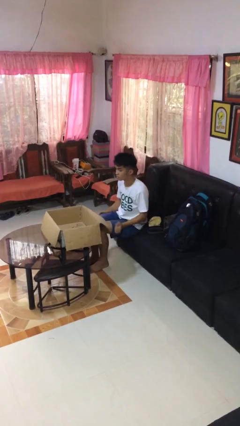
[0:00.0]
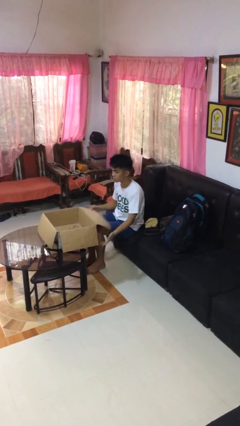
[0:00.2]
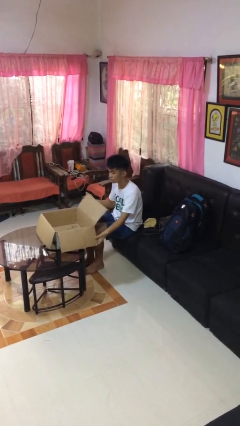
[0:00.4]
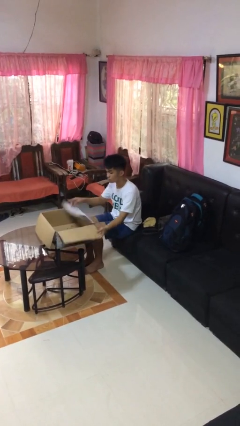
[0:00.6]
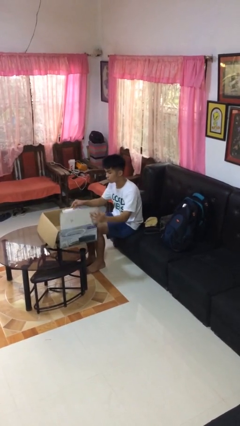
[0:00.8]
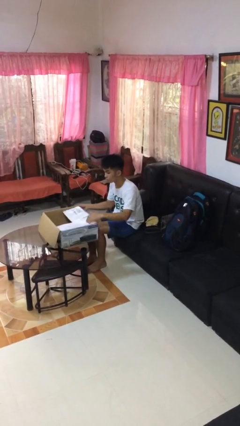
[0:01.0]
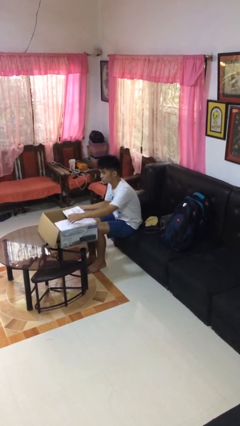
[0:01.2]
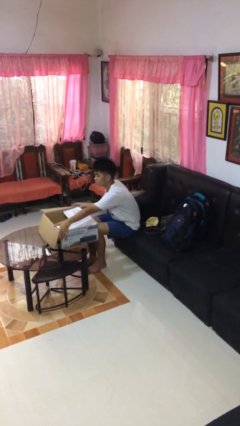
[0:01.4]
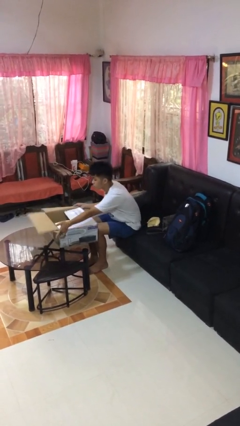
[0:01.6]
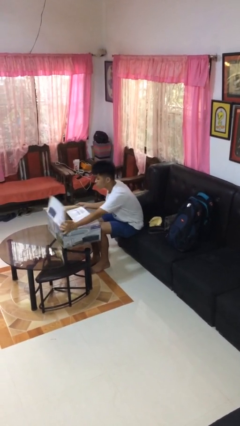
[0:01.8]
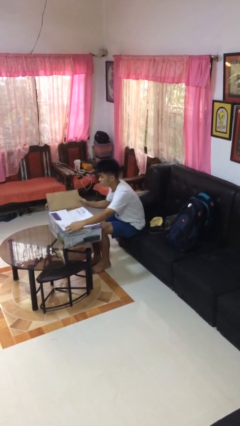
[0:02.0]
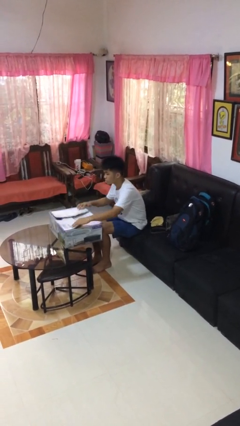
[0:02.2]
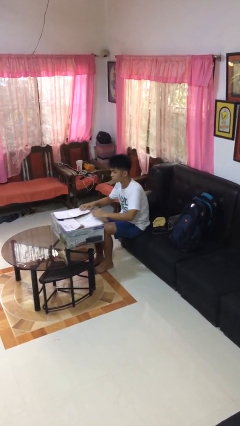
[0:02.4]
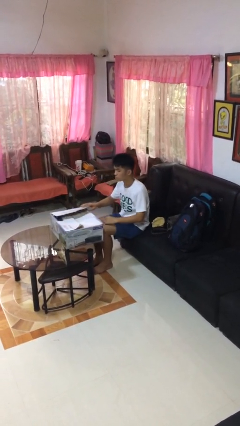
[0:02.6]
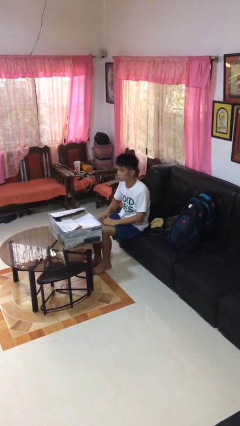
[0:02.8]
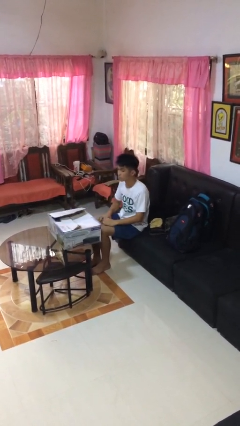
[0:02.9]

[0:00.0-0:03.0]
person closes box

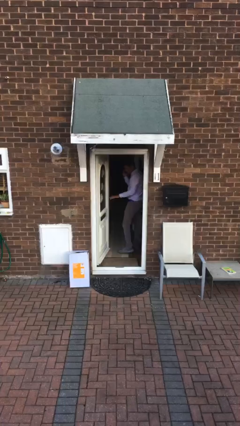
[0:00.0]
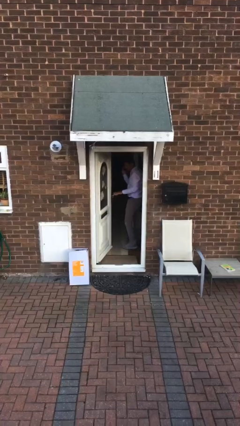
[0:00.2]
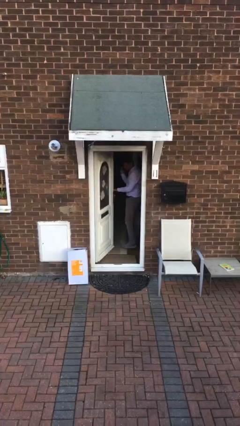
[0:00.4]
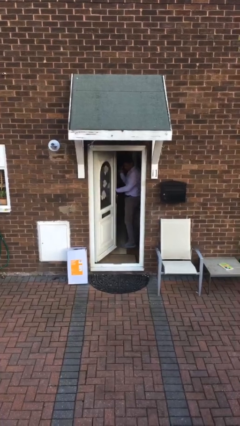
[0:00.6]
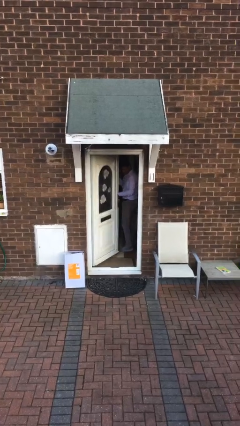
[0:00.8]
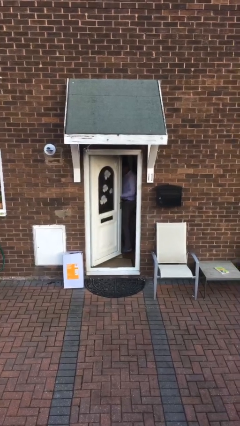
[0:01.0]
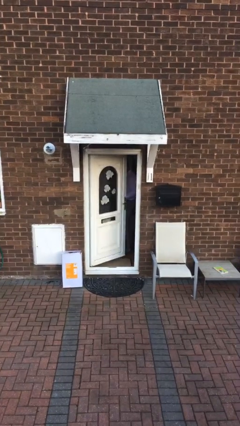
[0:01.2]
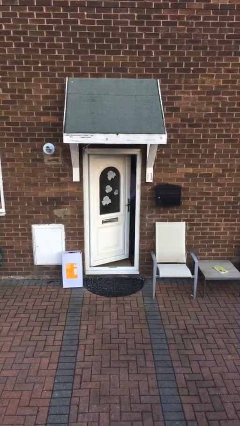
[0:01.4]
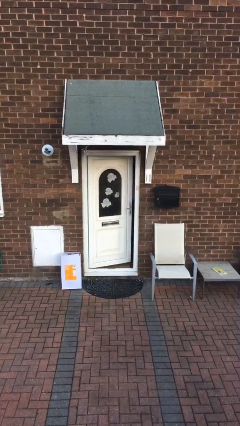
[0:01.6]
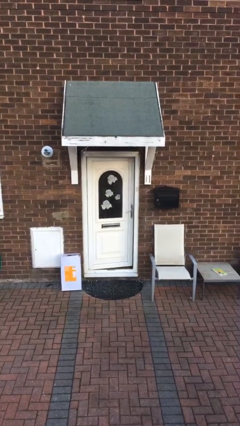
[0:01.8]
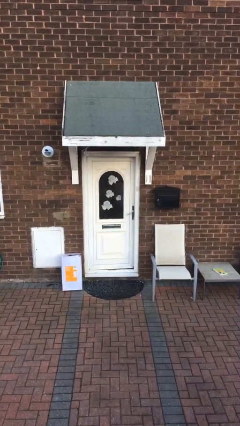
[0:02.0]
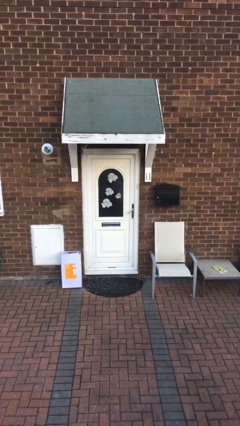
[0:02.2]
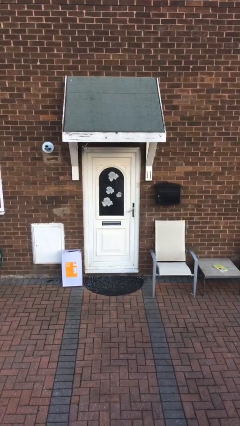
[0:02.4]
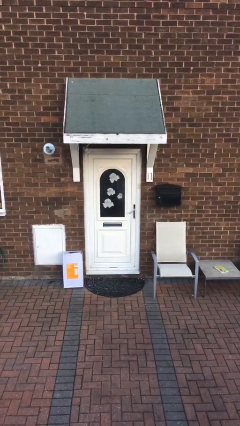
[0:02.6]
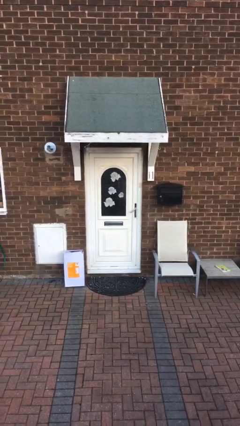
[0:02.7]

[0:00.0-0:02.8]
person closes facility door

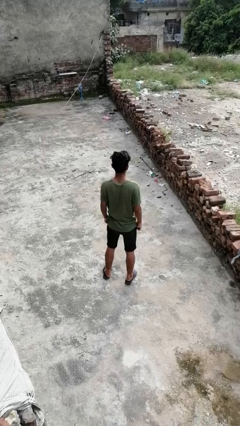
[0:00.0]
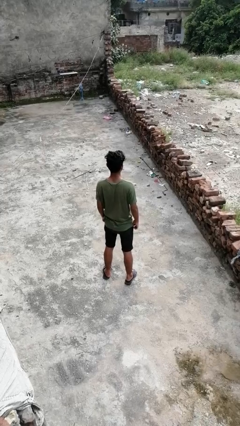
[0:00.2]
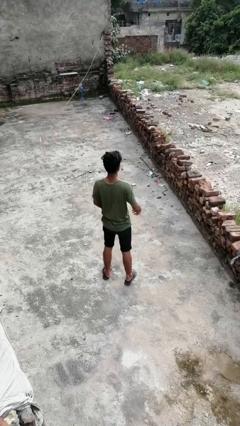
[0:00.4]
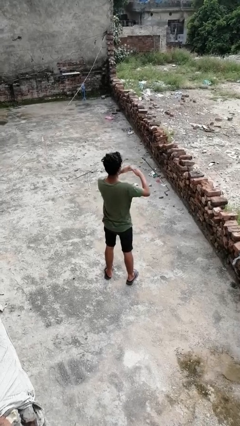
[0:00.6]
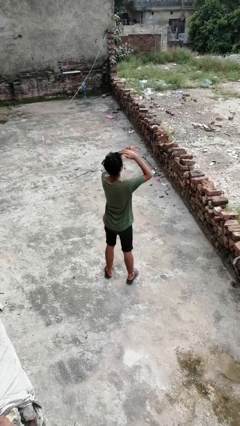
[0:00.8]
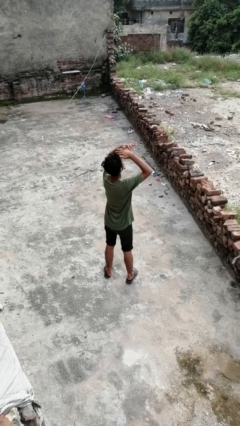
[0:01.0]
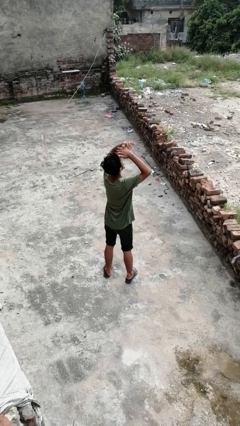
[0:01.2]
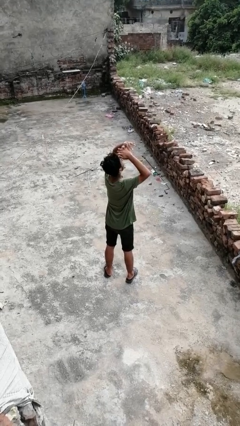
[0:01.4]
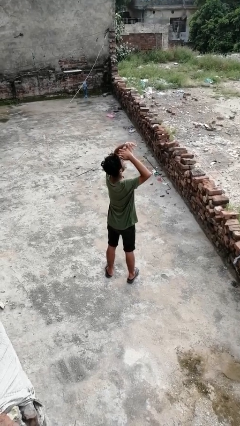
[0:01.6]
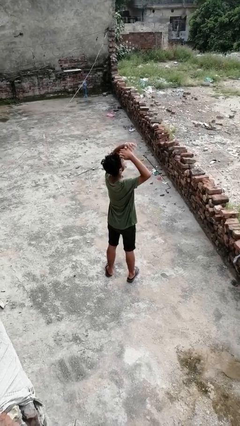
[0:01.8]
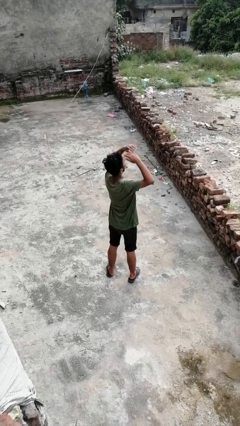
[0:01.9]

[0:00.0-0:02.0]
person shades eyes

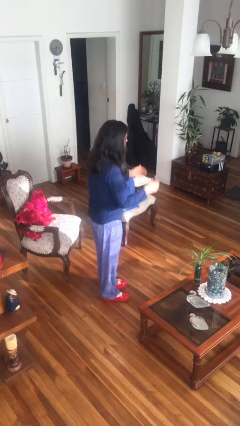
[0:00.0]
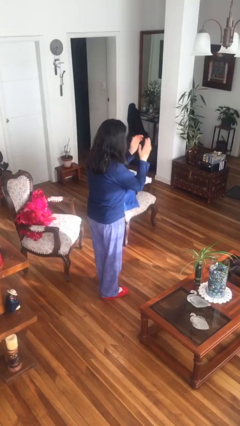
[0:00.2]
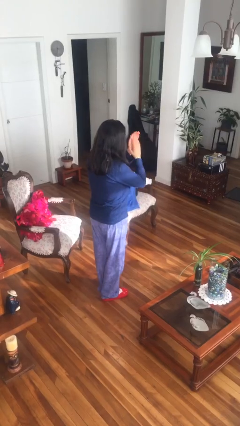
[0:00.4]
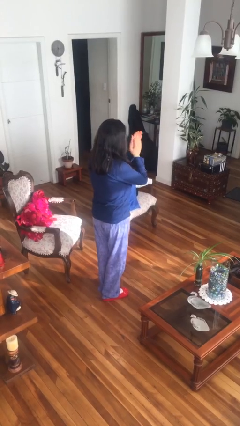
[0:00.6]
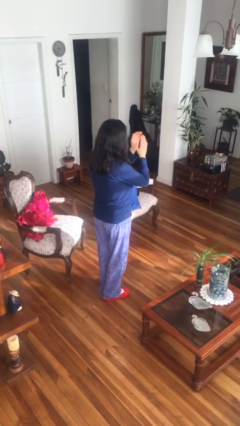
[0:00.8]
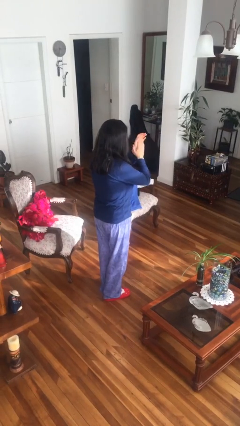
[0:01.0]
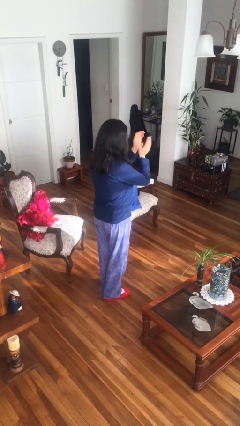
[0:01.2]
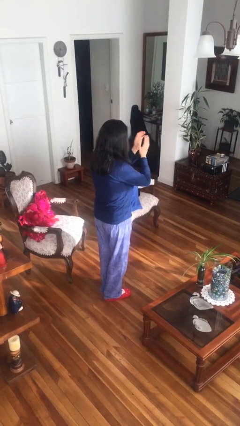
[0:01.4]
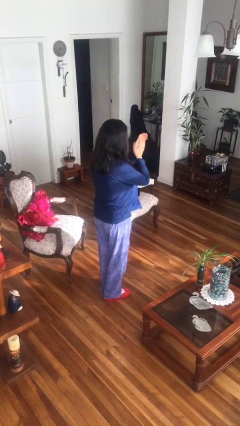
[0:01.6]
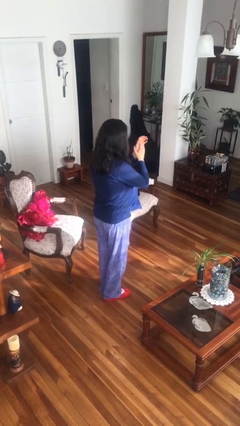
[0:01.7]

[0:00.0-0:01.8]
person claps hands

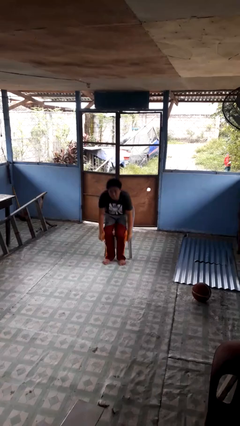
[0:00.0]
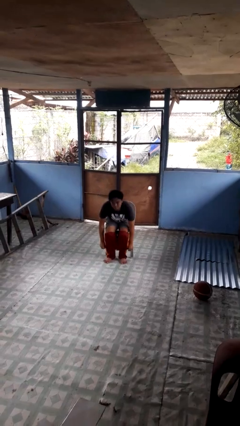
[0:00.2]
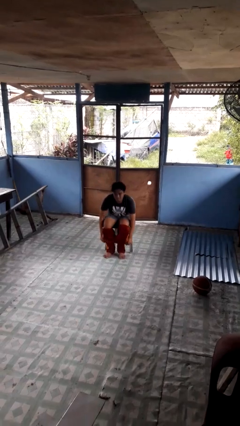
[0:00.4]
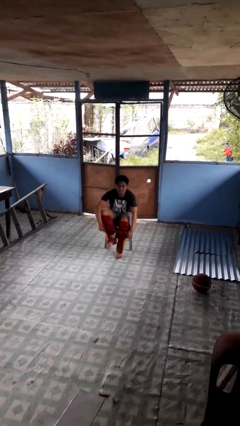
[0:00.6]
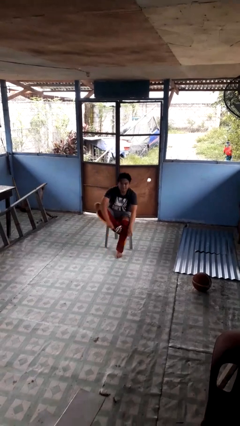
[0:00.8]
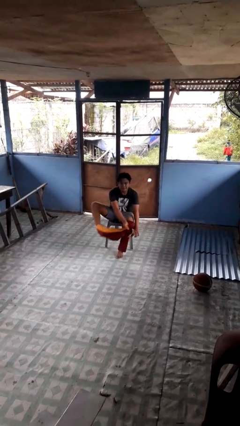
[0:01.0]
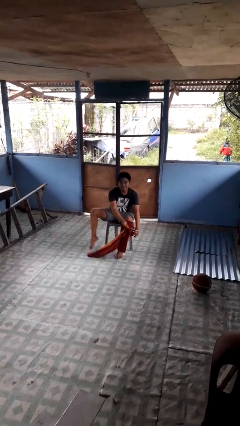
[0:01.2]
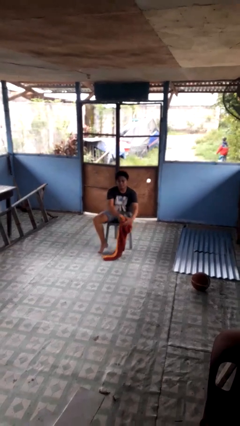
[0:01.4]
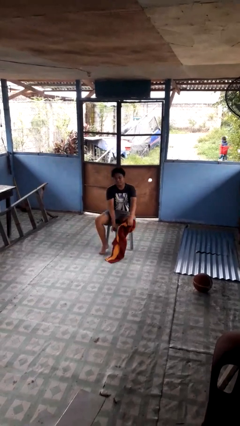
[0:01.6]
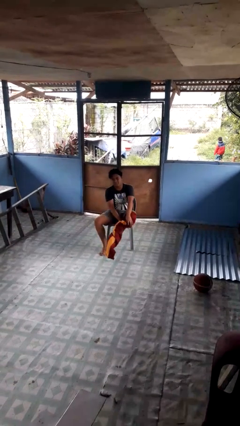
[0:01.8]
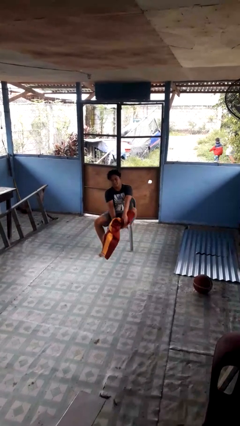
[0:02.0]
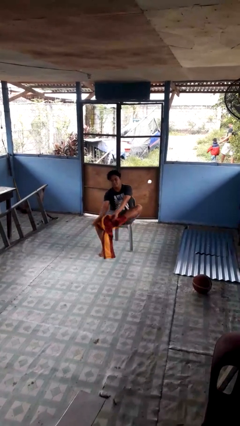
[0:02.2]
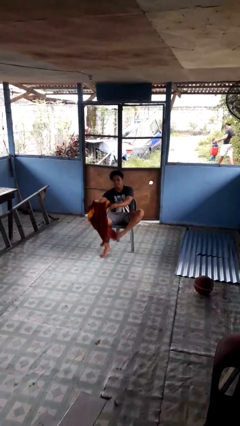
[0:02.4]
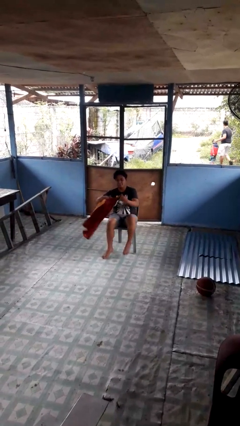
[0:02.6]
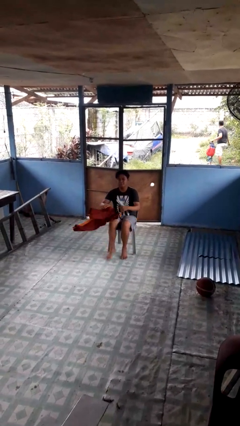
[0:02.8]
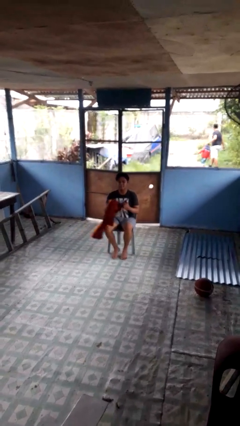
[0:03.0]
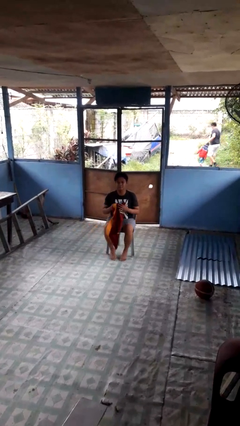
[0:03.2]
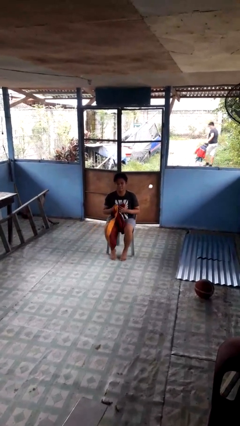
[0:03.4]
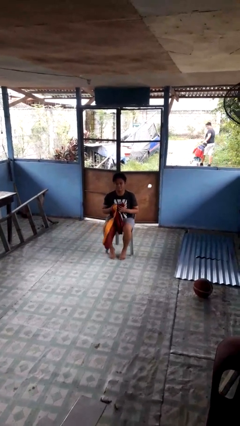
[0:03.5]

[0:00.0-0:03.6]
person takes off pants

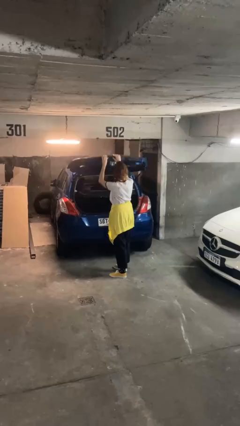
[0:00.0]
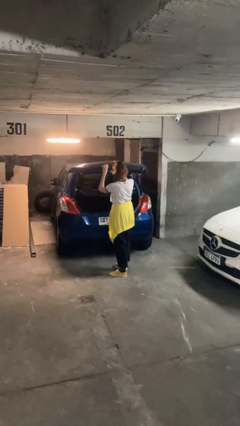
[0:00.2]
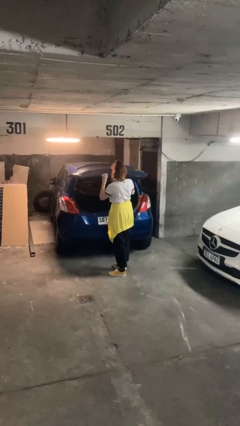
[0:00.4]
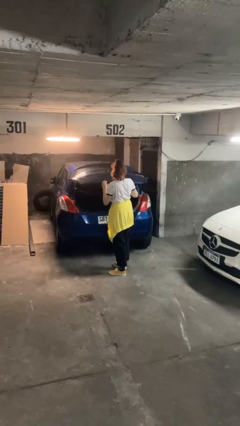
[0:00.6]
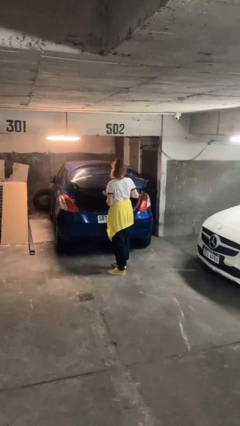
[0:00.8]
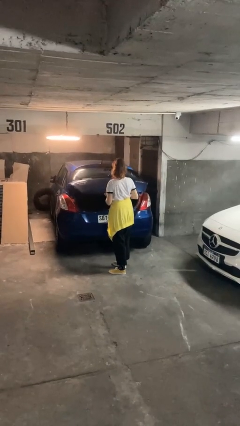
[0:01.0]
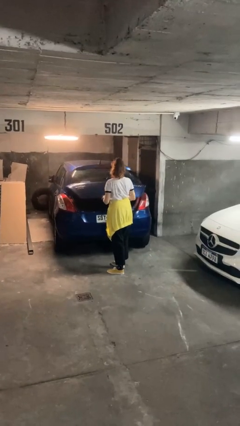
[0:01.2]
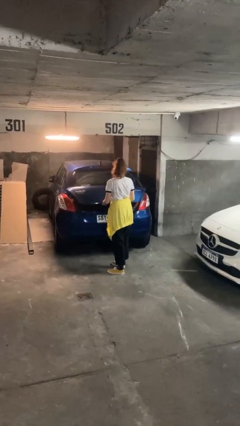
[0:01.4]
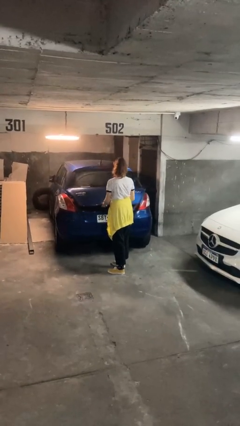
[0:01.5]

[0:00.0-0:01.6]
person closes car trunk

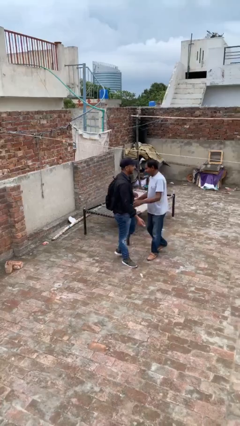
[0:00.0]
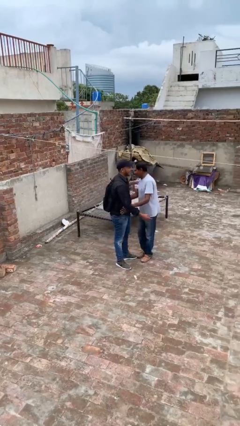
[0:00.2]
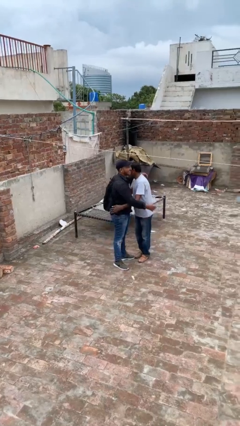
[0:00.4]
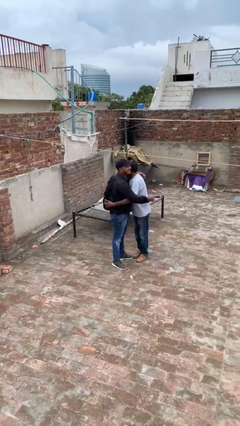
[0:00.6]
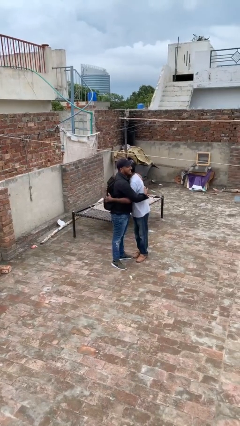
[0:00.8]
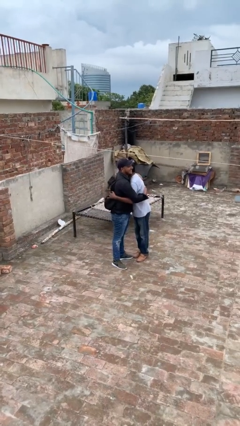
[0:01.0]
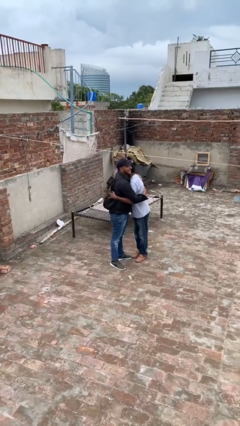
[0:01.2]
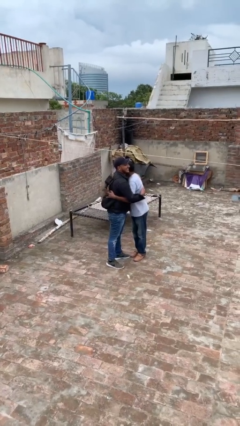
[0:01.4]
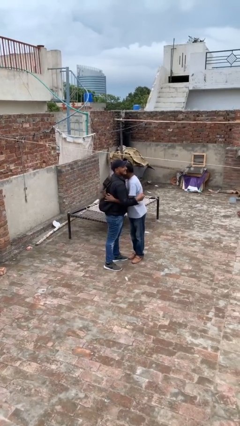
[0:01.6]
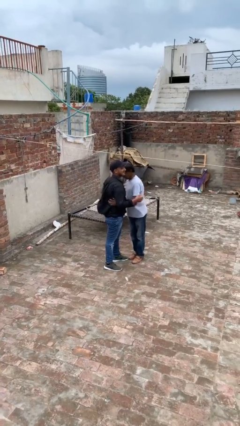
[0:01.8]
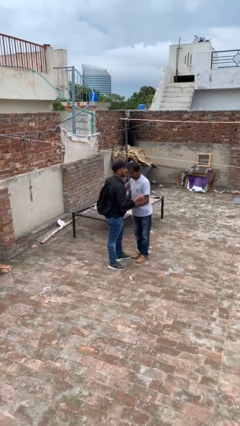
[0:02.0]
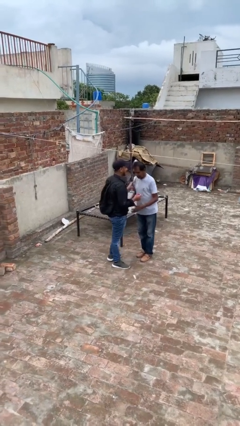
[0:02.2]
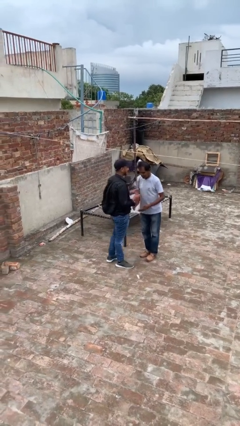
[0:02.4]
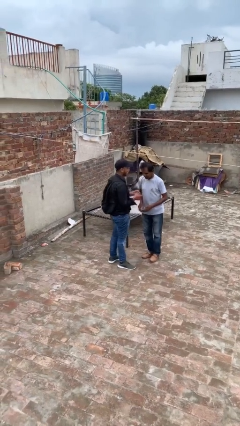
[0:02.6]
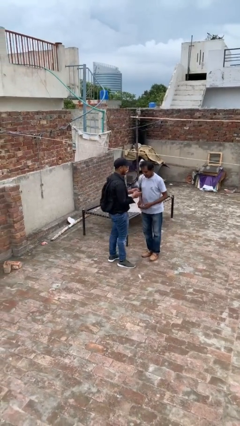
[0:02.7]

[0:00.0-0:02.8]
person embraces person
